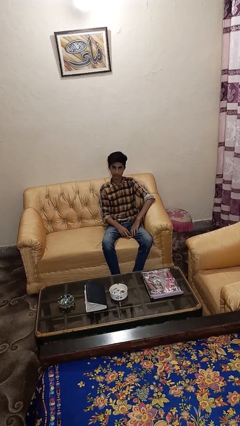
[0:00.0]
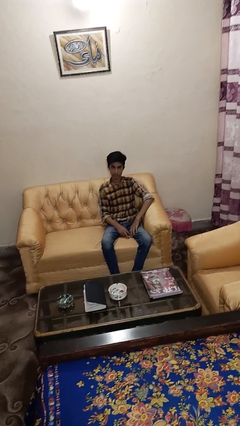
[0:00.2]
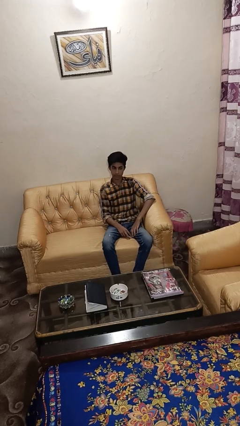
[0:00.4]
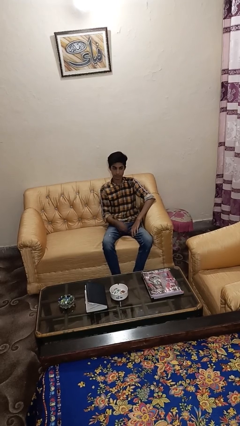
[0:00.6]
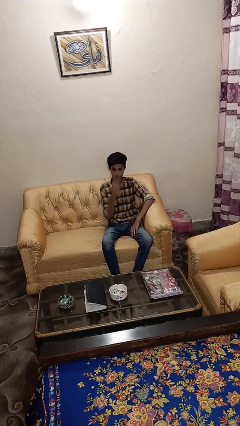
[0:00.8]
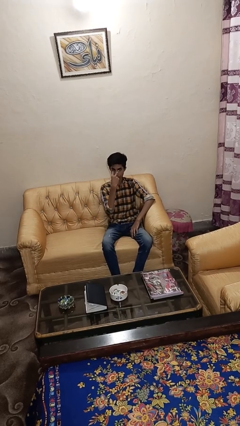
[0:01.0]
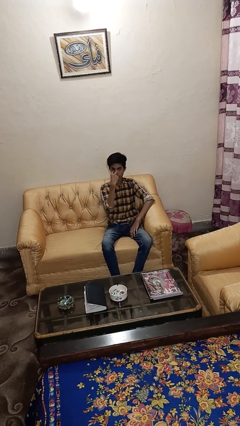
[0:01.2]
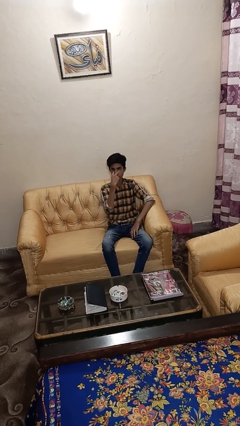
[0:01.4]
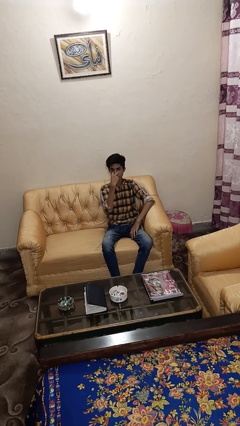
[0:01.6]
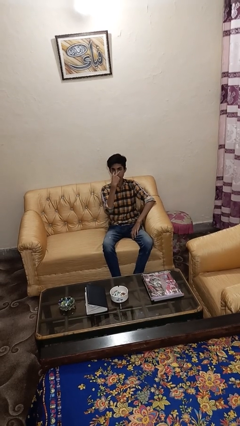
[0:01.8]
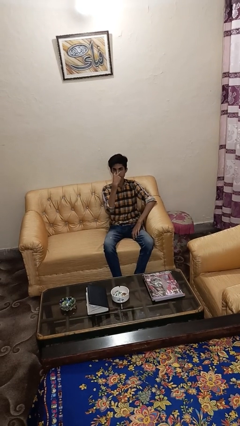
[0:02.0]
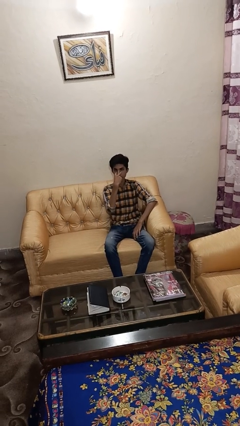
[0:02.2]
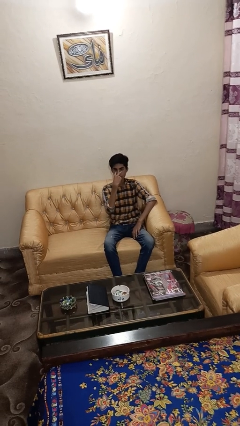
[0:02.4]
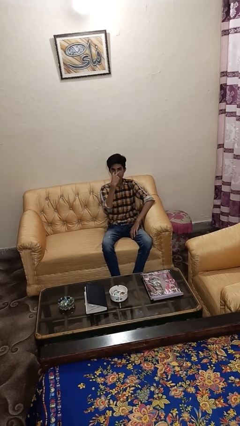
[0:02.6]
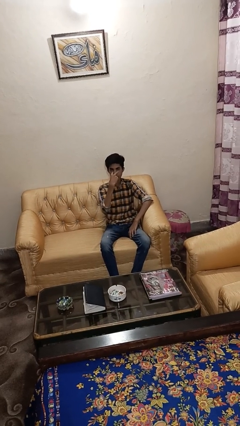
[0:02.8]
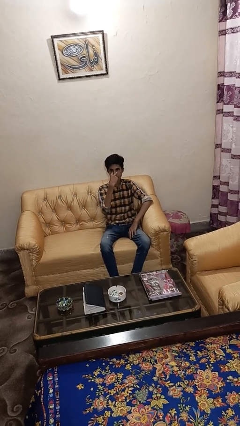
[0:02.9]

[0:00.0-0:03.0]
person gestures watch closely

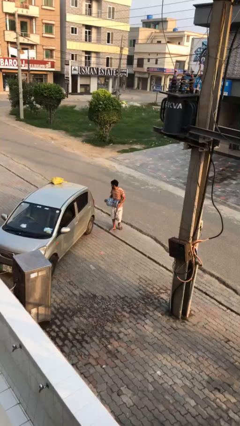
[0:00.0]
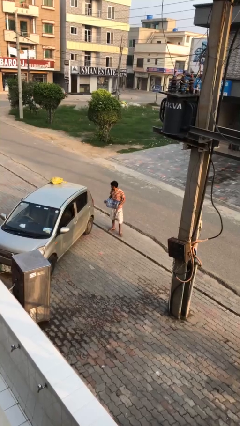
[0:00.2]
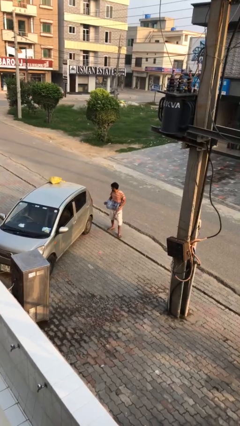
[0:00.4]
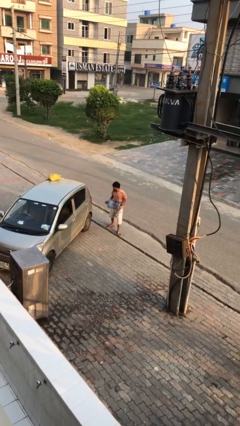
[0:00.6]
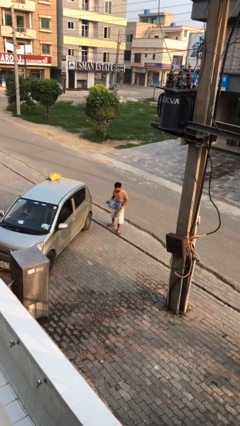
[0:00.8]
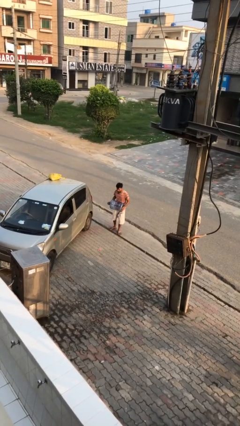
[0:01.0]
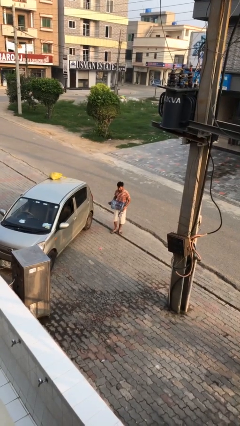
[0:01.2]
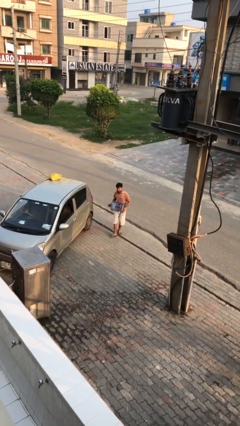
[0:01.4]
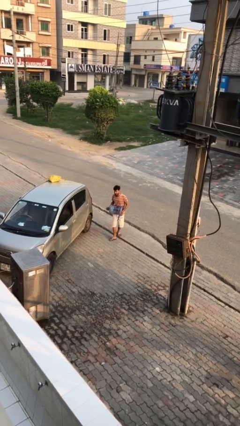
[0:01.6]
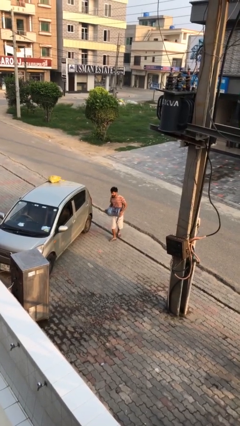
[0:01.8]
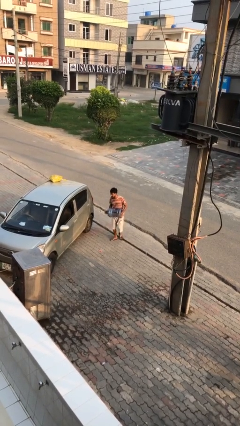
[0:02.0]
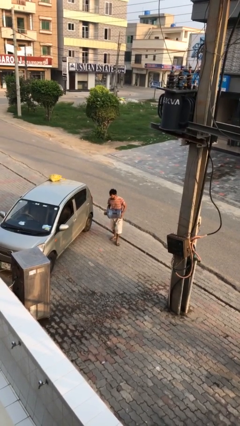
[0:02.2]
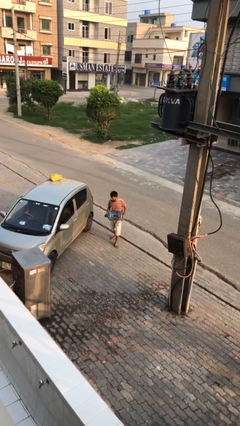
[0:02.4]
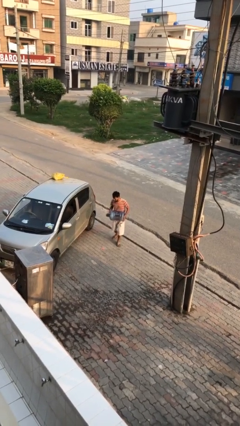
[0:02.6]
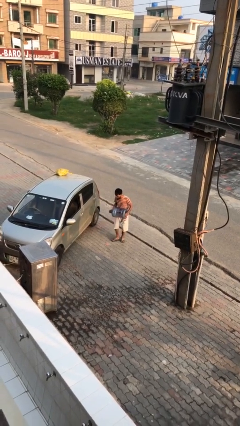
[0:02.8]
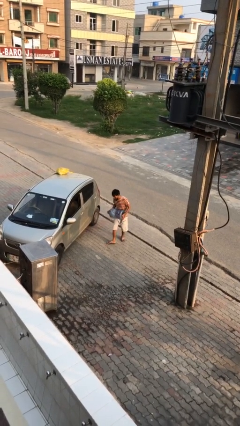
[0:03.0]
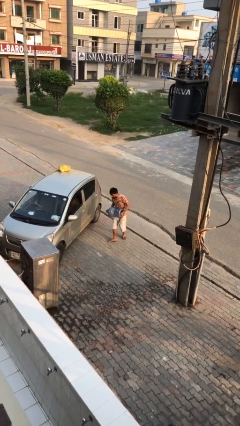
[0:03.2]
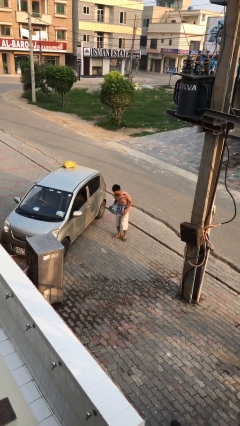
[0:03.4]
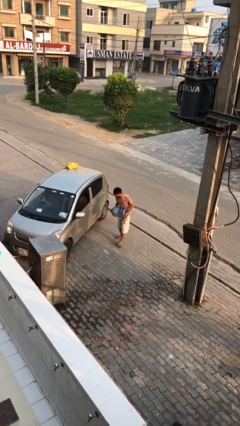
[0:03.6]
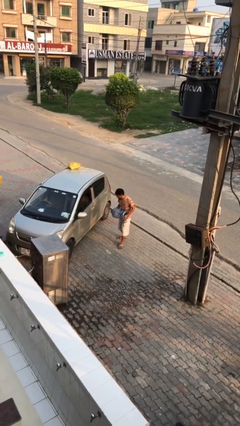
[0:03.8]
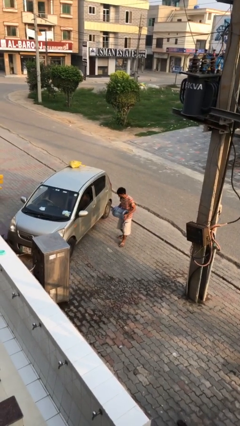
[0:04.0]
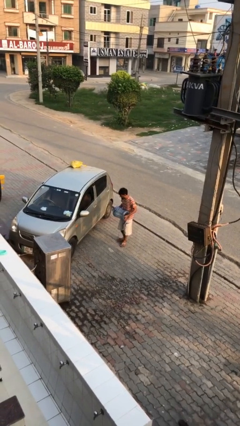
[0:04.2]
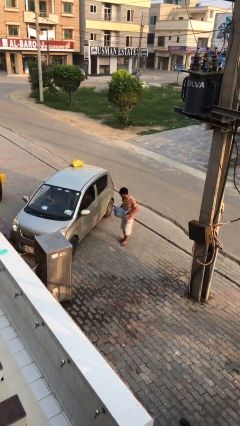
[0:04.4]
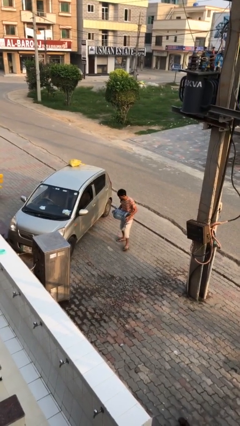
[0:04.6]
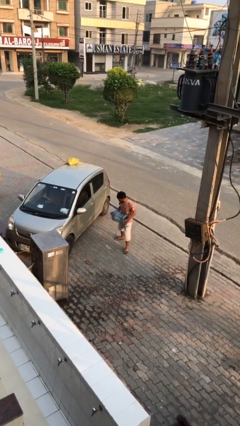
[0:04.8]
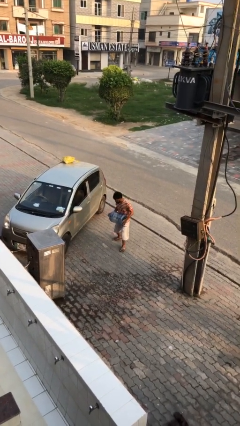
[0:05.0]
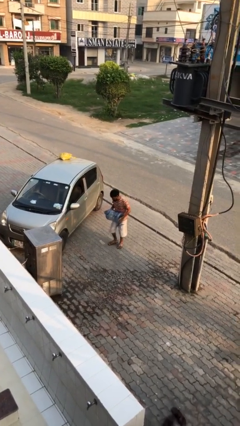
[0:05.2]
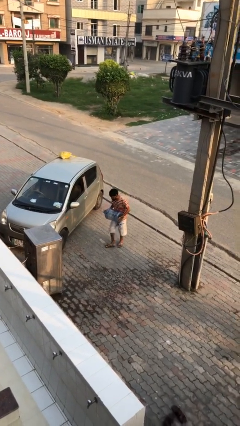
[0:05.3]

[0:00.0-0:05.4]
person carries heavy object

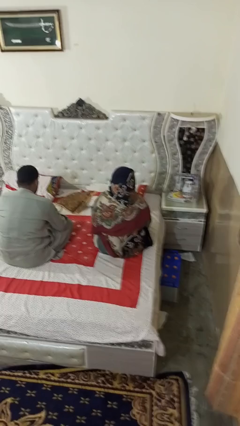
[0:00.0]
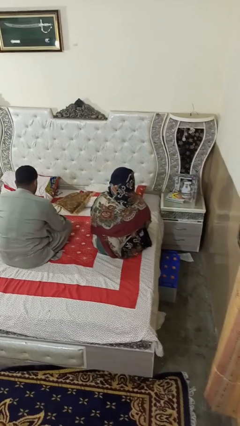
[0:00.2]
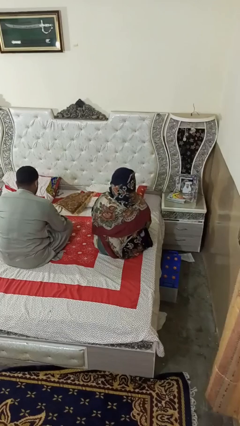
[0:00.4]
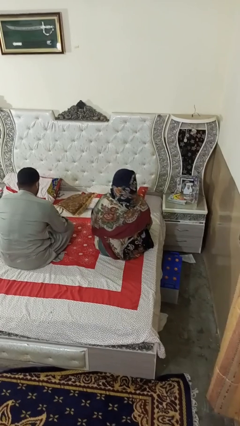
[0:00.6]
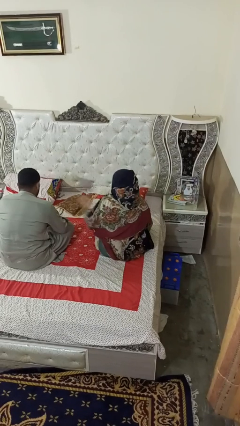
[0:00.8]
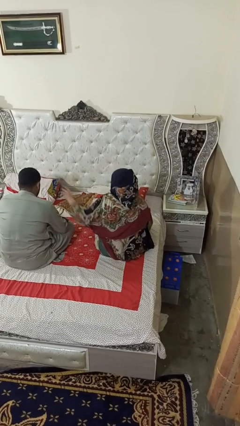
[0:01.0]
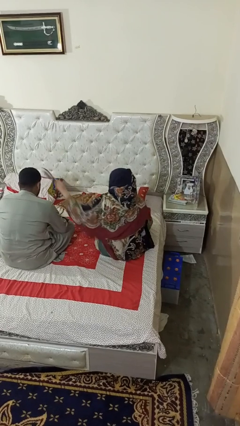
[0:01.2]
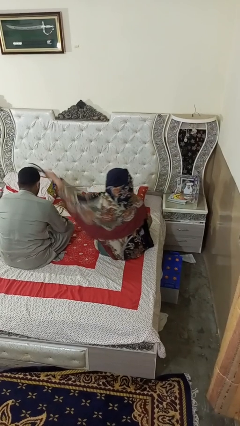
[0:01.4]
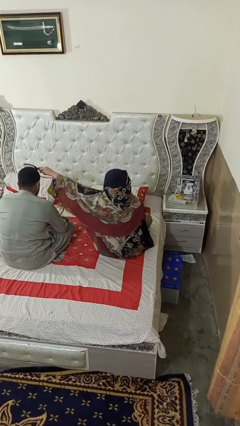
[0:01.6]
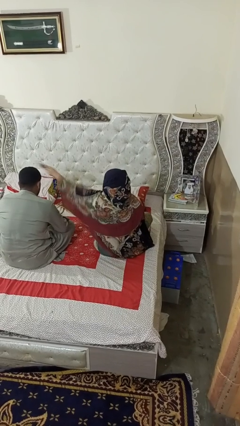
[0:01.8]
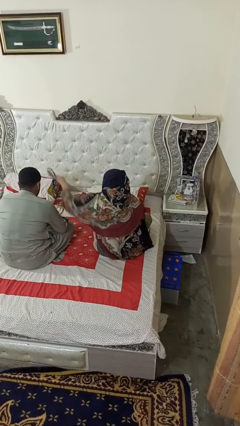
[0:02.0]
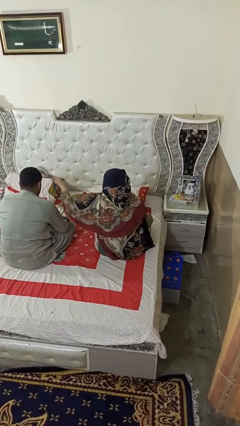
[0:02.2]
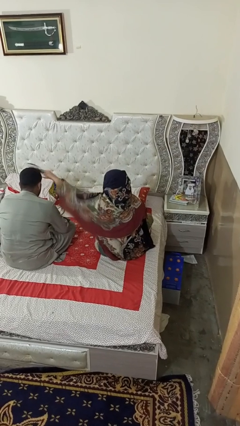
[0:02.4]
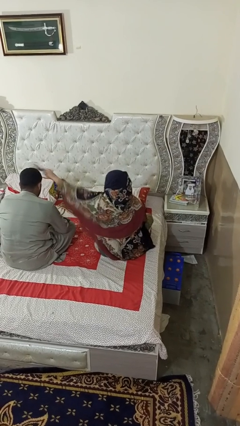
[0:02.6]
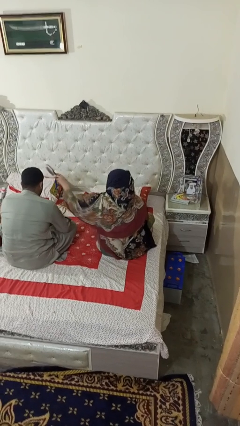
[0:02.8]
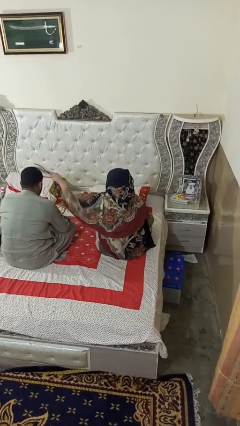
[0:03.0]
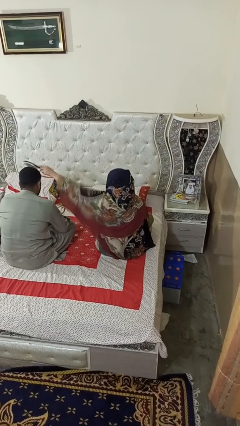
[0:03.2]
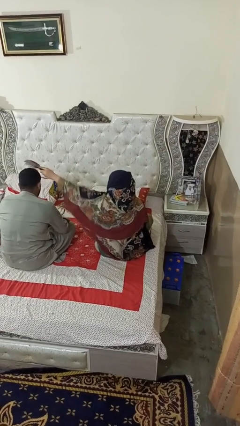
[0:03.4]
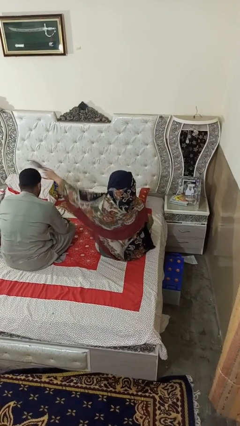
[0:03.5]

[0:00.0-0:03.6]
person brushes hair of person

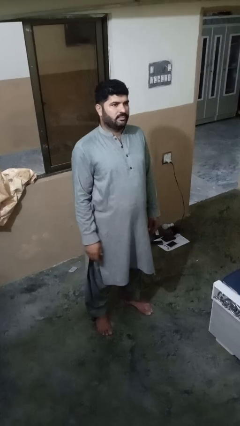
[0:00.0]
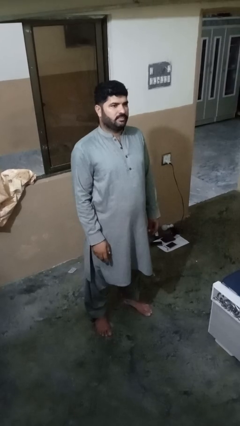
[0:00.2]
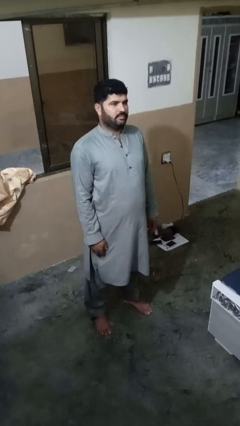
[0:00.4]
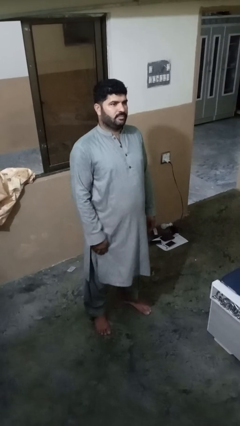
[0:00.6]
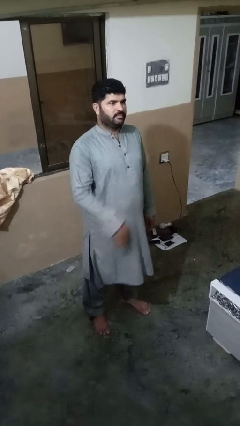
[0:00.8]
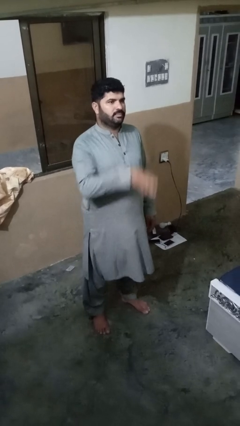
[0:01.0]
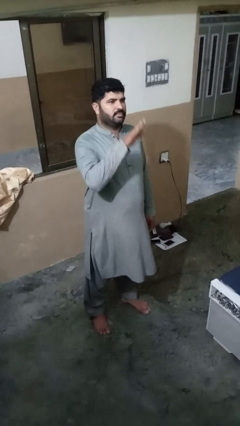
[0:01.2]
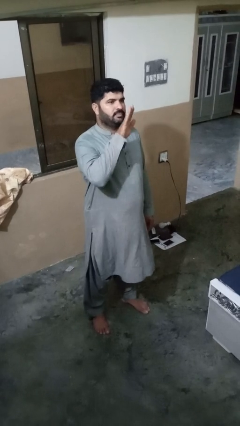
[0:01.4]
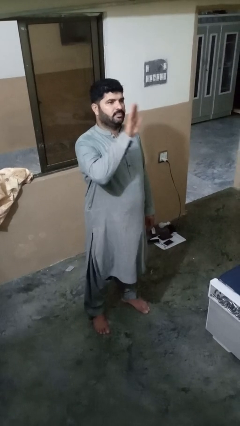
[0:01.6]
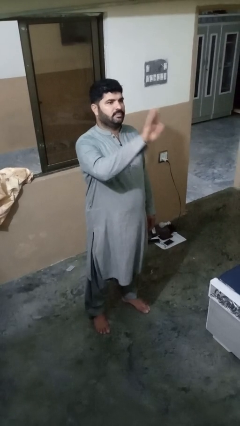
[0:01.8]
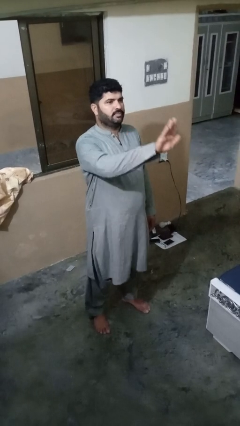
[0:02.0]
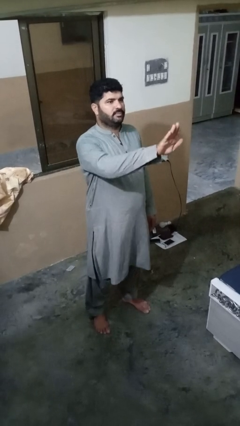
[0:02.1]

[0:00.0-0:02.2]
person gestures stop

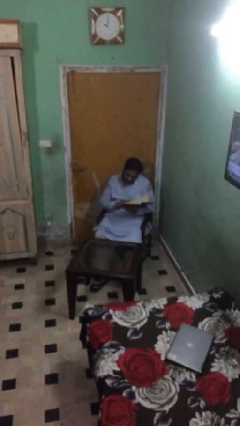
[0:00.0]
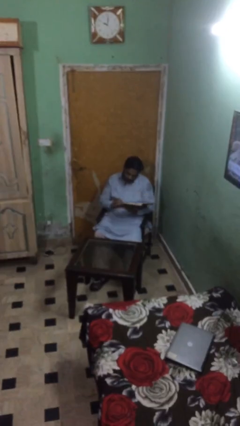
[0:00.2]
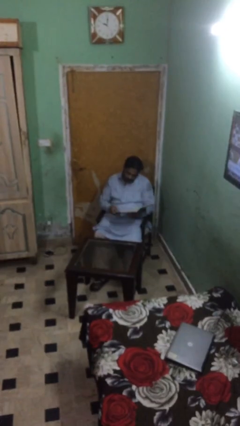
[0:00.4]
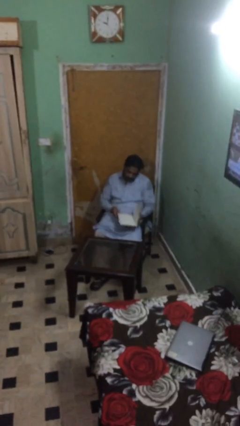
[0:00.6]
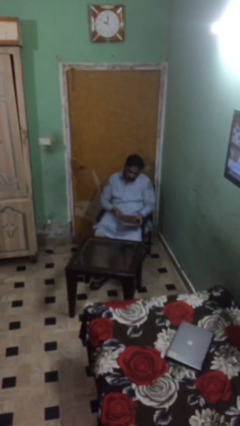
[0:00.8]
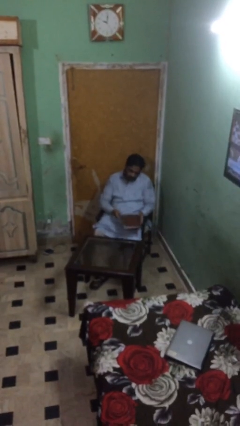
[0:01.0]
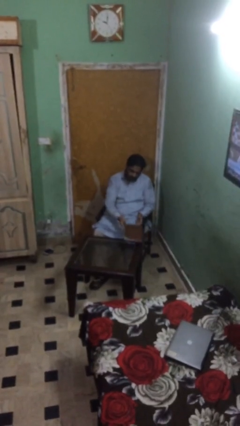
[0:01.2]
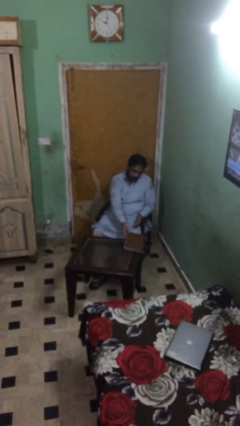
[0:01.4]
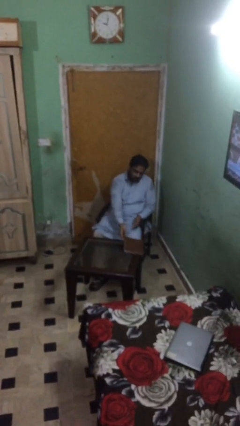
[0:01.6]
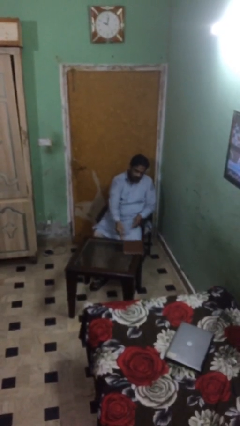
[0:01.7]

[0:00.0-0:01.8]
person puts down object on table

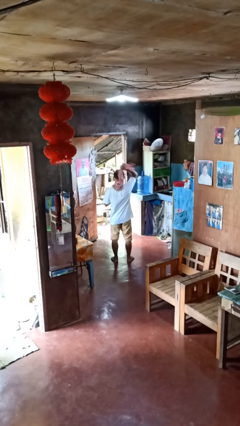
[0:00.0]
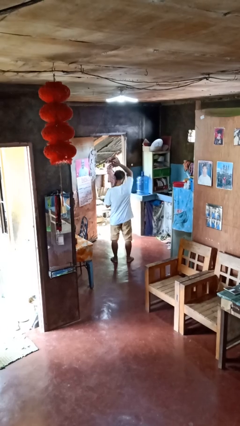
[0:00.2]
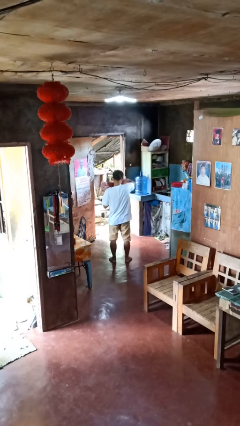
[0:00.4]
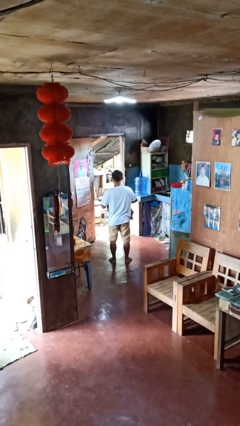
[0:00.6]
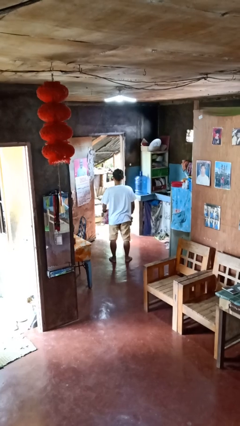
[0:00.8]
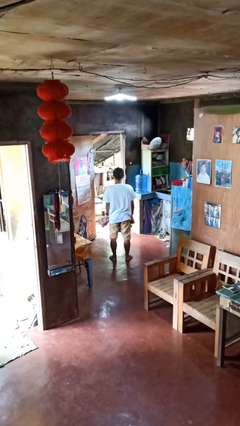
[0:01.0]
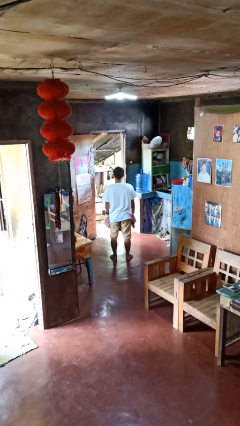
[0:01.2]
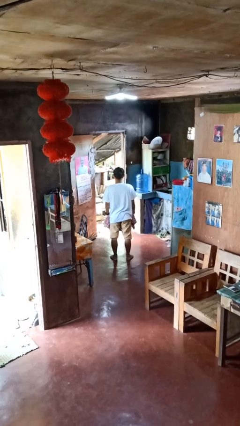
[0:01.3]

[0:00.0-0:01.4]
person takes off scarf
